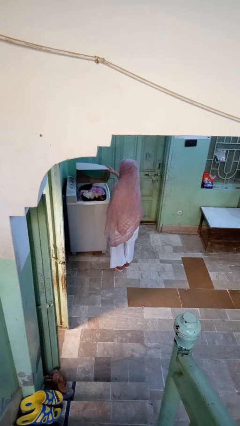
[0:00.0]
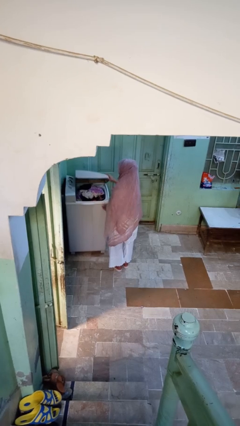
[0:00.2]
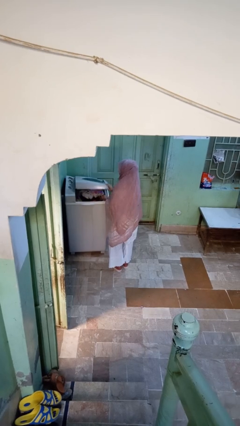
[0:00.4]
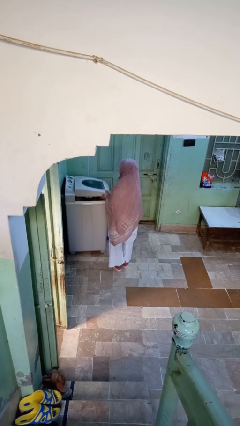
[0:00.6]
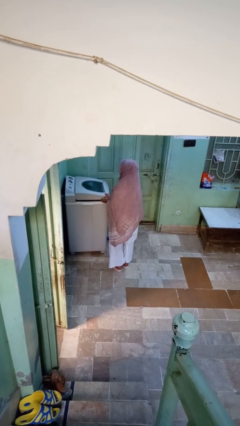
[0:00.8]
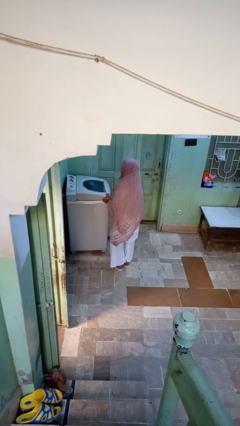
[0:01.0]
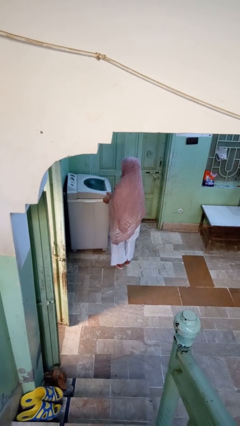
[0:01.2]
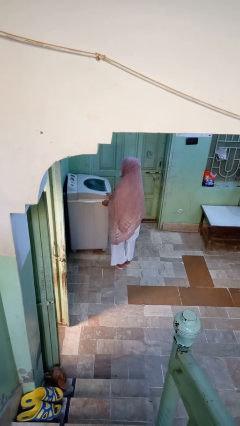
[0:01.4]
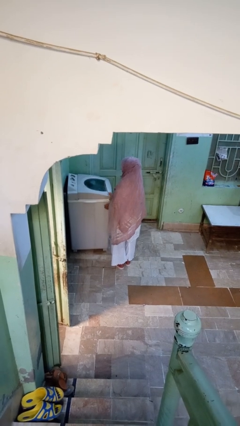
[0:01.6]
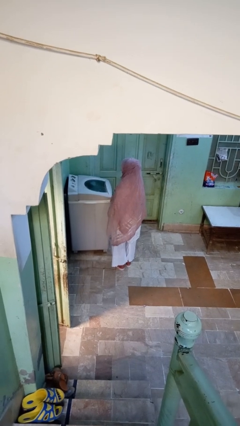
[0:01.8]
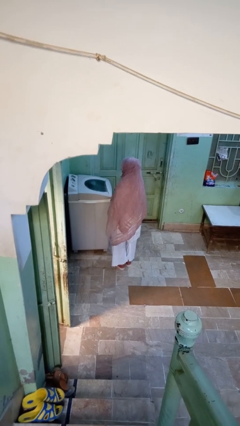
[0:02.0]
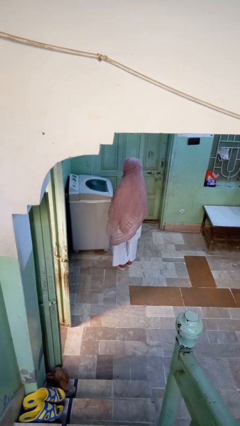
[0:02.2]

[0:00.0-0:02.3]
person closes clothes washer

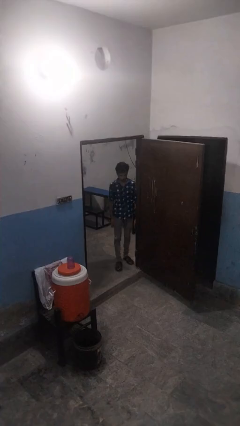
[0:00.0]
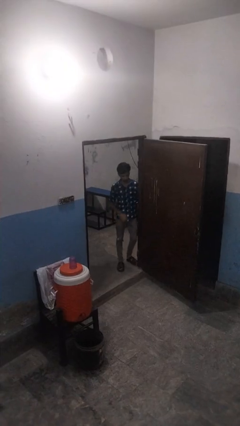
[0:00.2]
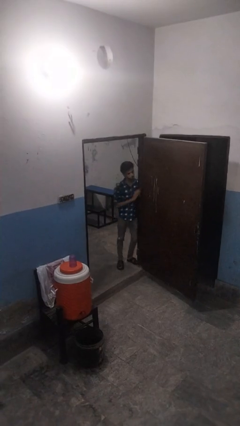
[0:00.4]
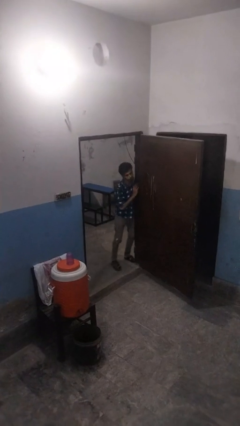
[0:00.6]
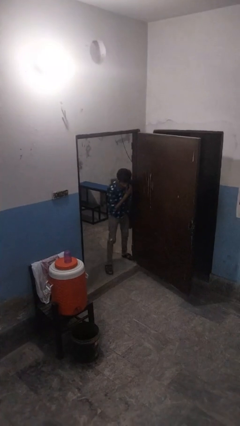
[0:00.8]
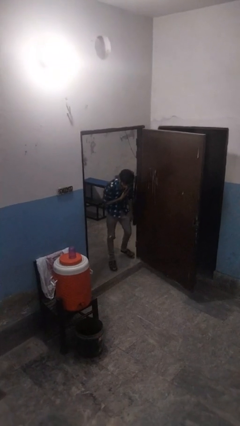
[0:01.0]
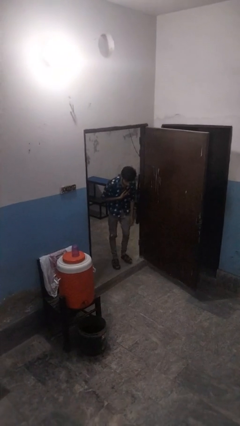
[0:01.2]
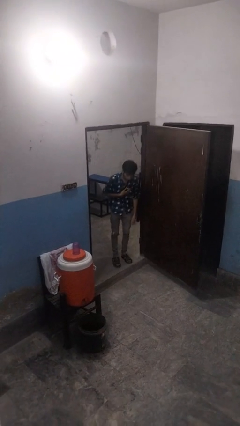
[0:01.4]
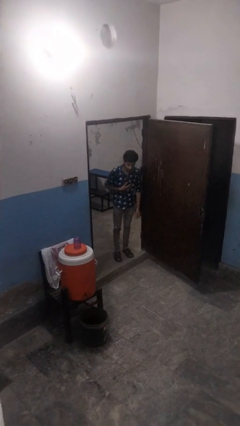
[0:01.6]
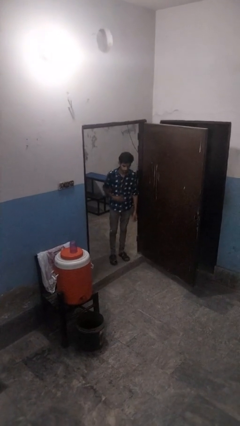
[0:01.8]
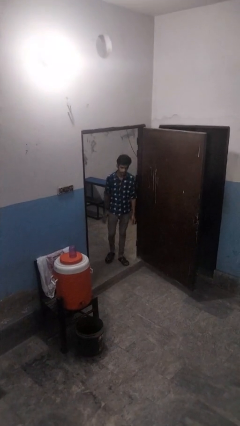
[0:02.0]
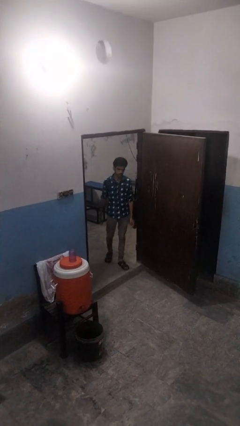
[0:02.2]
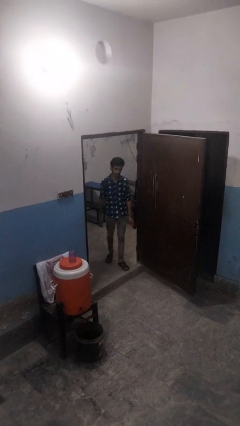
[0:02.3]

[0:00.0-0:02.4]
person bumps into wall

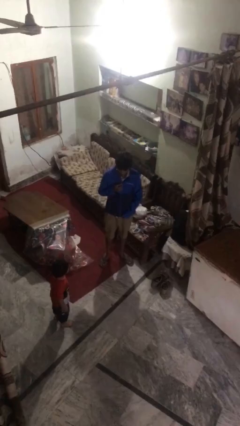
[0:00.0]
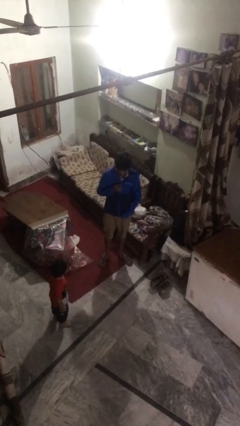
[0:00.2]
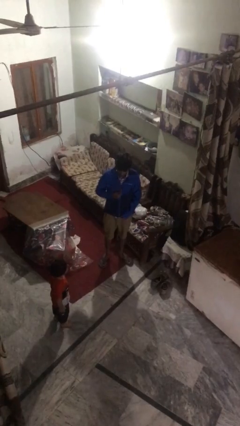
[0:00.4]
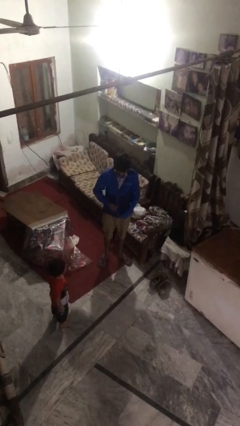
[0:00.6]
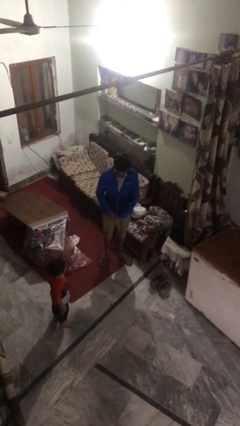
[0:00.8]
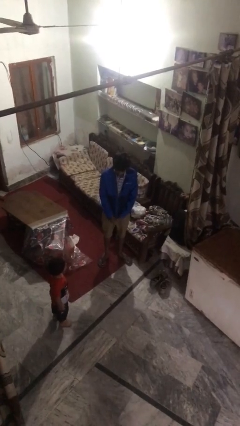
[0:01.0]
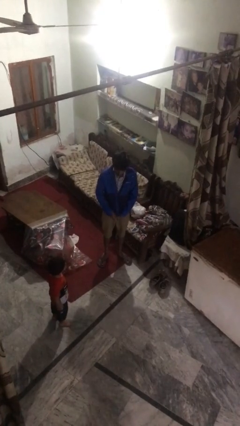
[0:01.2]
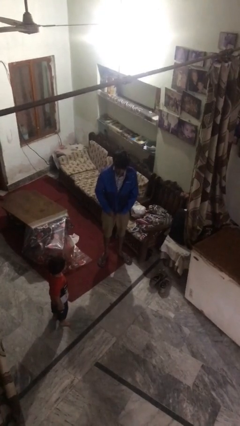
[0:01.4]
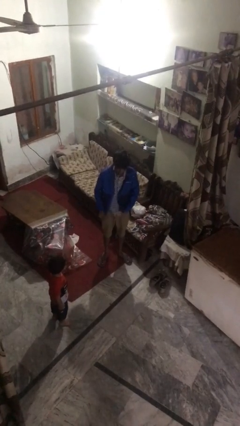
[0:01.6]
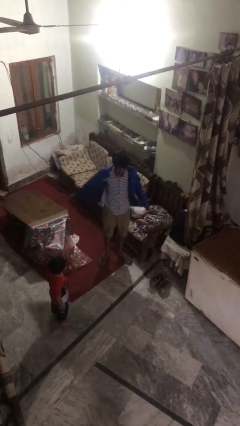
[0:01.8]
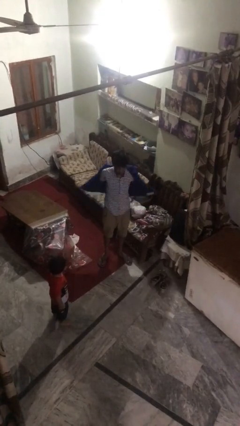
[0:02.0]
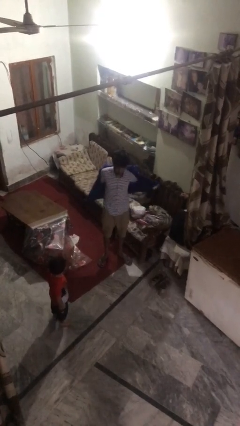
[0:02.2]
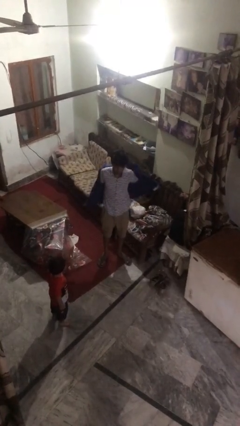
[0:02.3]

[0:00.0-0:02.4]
person unzips jacket

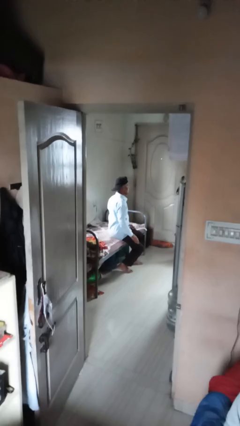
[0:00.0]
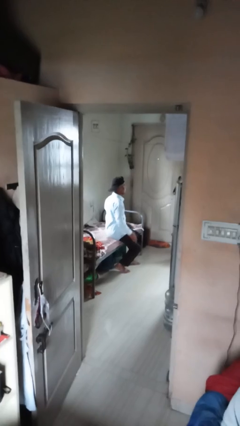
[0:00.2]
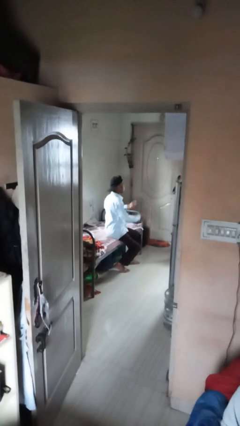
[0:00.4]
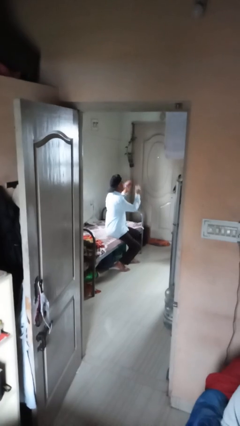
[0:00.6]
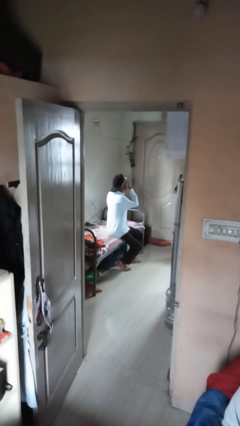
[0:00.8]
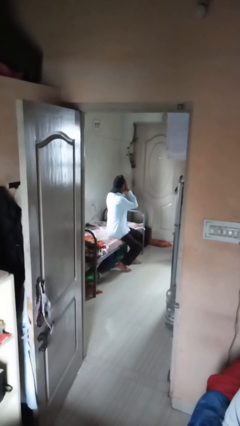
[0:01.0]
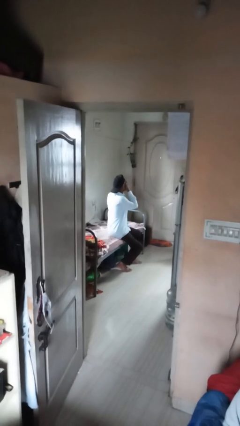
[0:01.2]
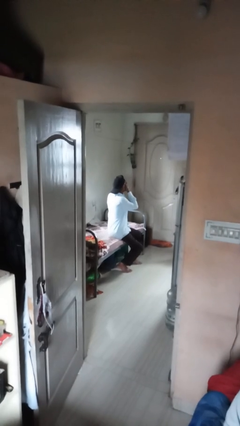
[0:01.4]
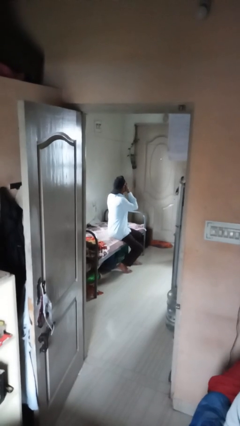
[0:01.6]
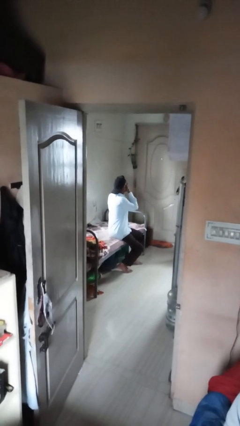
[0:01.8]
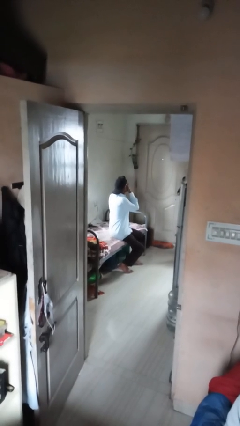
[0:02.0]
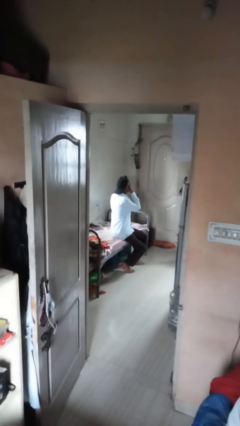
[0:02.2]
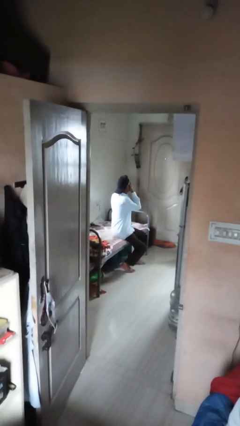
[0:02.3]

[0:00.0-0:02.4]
person covers face with hands

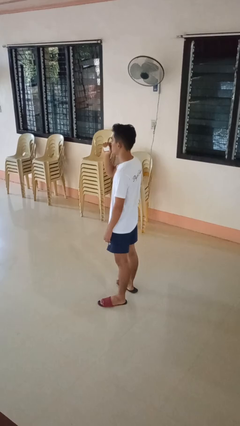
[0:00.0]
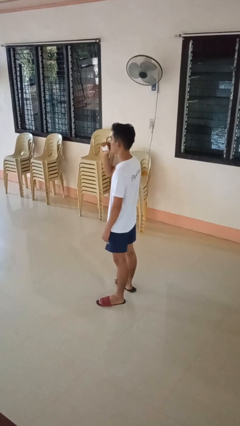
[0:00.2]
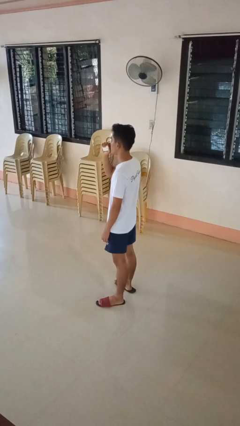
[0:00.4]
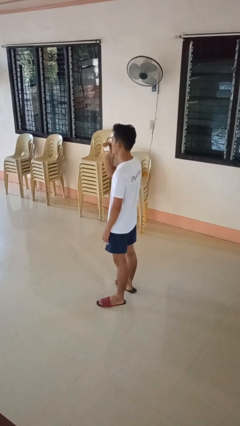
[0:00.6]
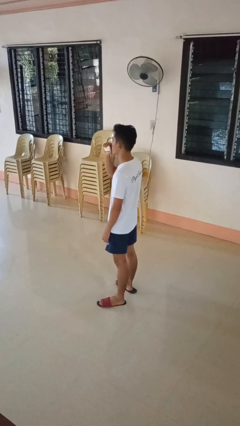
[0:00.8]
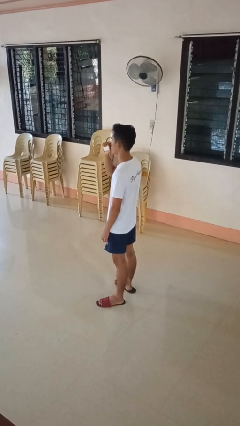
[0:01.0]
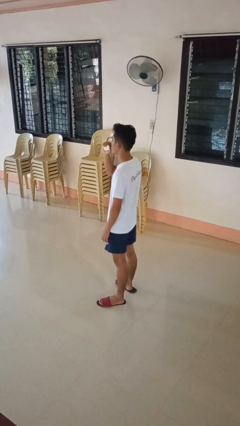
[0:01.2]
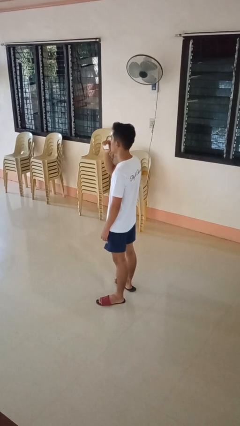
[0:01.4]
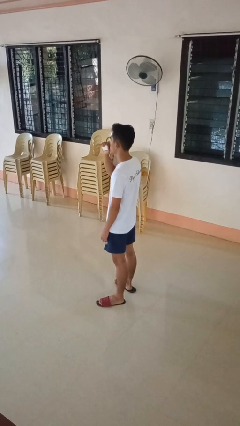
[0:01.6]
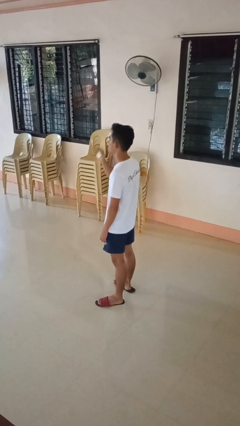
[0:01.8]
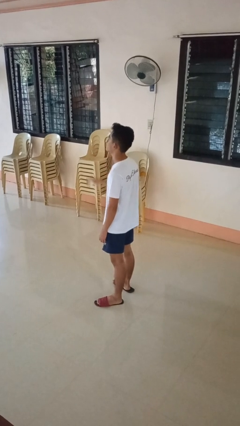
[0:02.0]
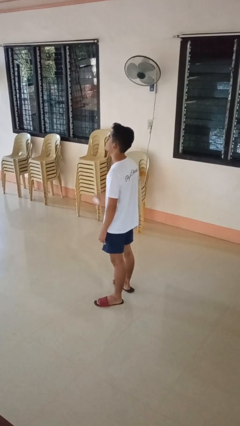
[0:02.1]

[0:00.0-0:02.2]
person vapes

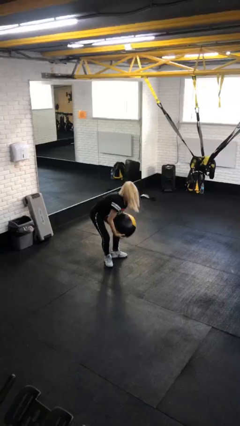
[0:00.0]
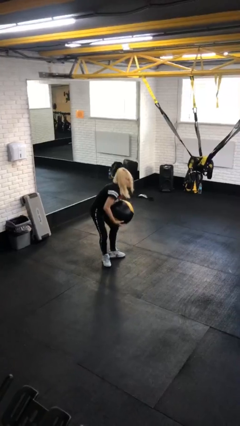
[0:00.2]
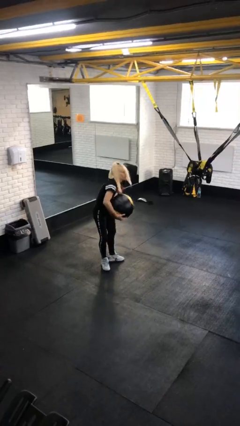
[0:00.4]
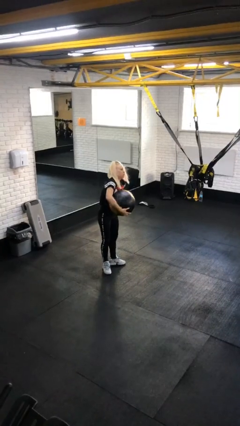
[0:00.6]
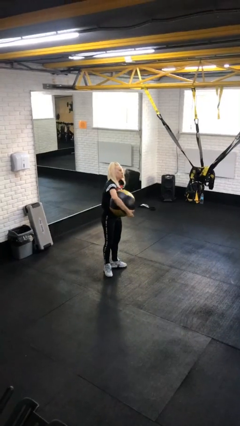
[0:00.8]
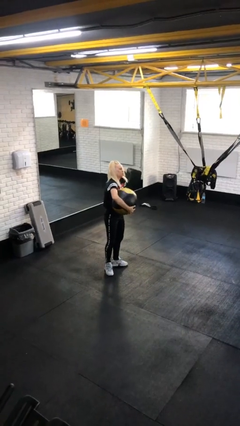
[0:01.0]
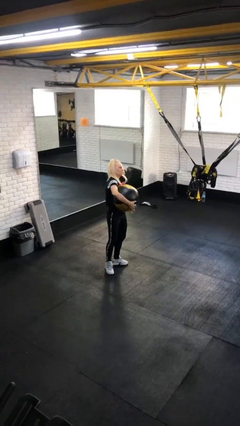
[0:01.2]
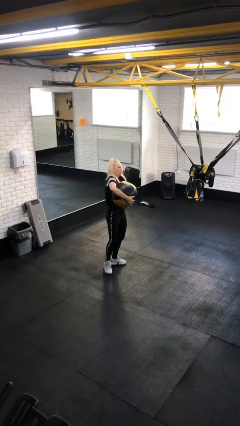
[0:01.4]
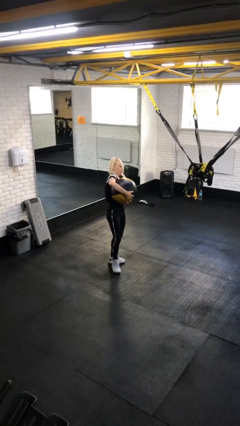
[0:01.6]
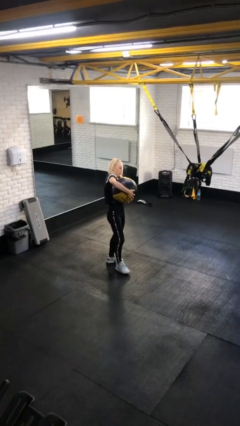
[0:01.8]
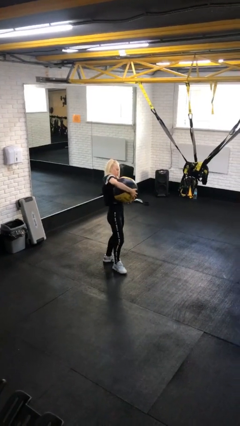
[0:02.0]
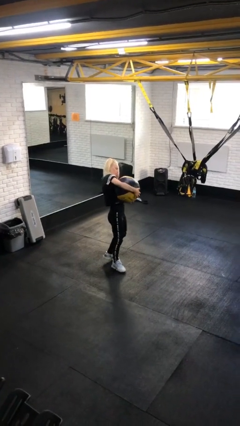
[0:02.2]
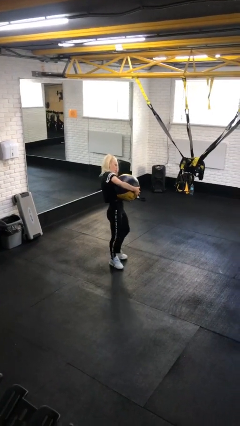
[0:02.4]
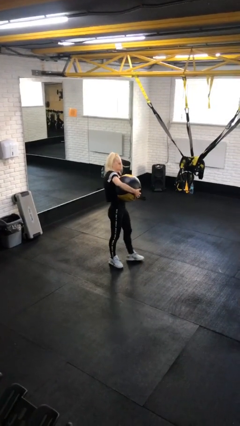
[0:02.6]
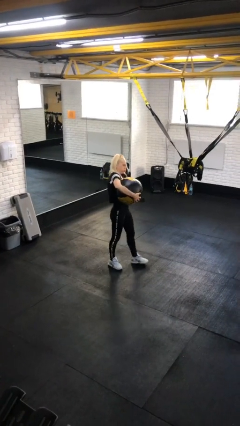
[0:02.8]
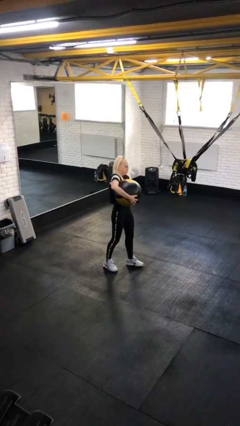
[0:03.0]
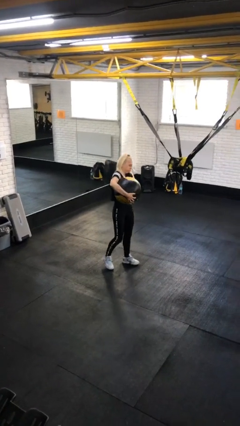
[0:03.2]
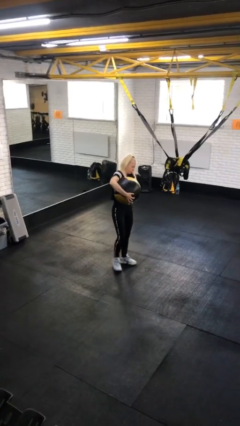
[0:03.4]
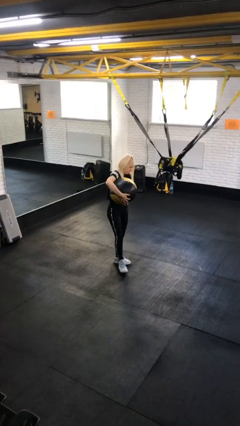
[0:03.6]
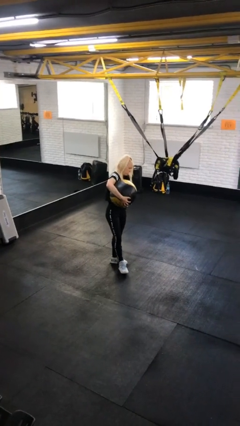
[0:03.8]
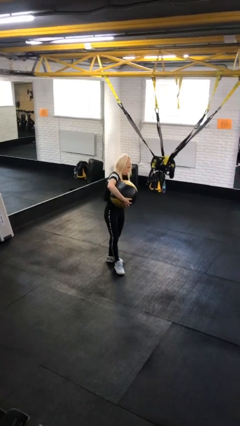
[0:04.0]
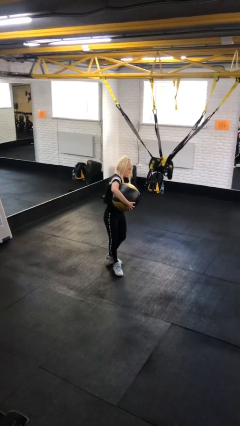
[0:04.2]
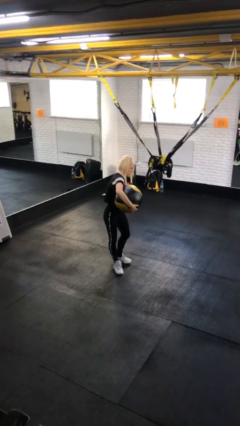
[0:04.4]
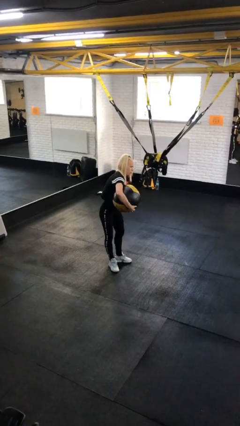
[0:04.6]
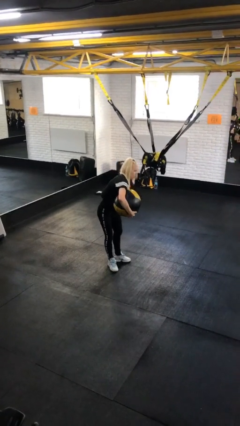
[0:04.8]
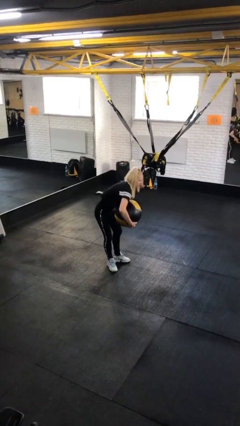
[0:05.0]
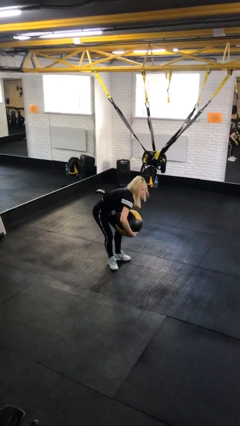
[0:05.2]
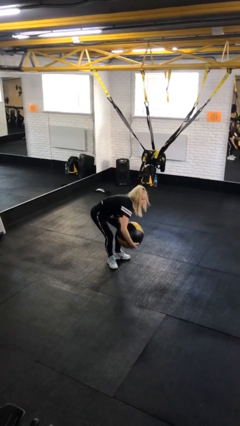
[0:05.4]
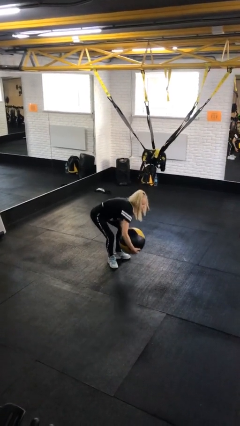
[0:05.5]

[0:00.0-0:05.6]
person carries heavy object

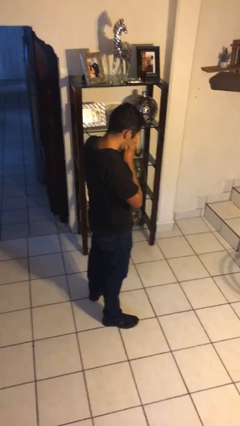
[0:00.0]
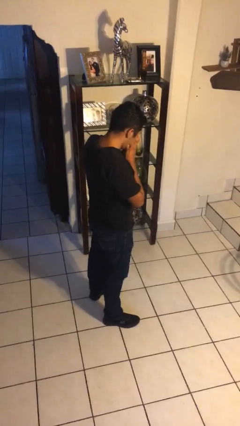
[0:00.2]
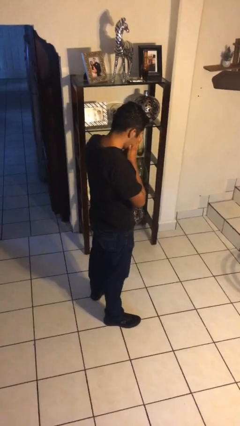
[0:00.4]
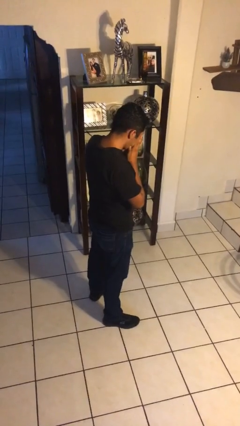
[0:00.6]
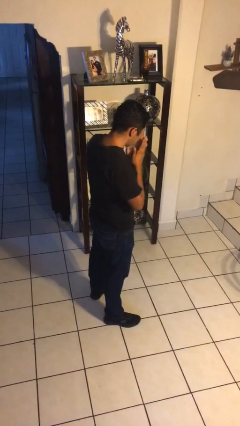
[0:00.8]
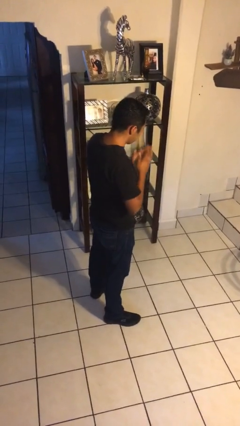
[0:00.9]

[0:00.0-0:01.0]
person sneezes into hand
